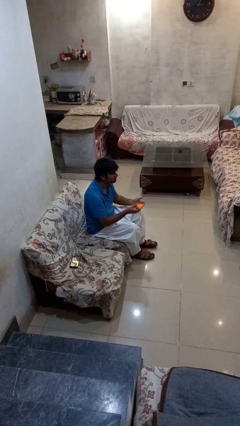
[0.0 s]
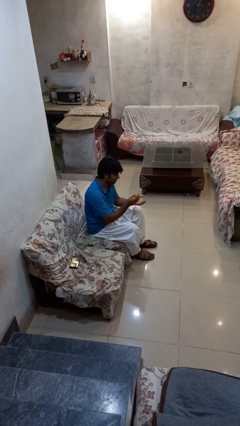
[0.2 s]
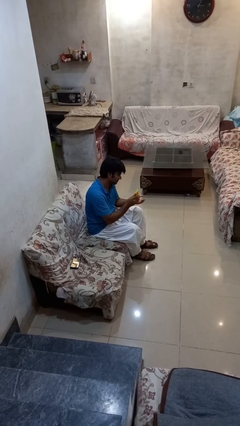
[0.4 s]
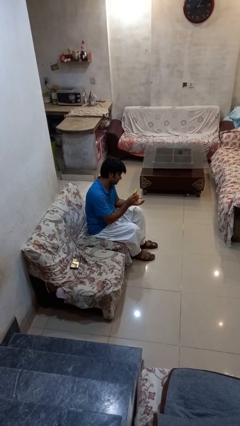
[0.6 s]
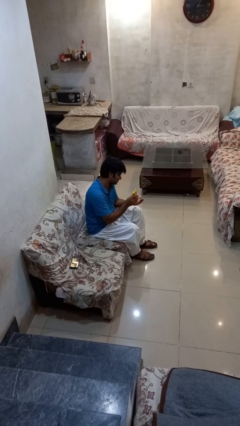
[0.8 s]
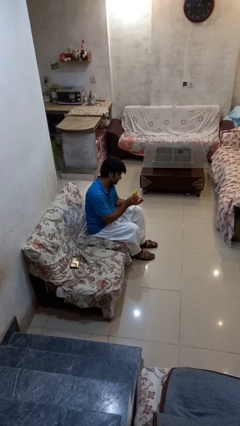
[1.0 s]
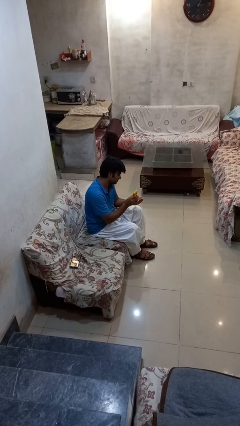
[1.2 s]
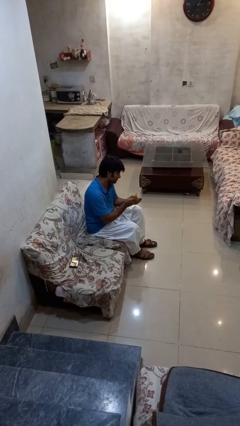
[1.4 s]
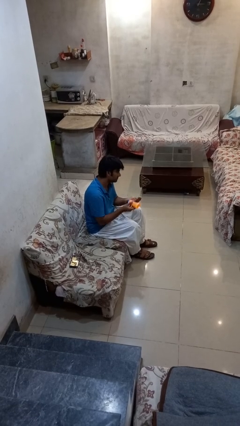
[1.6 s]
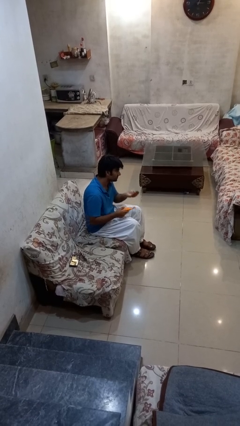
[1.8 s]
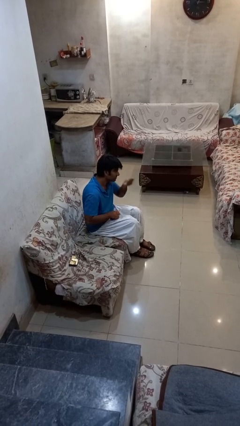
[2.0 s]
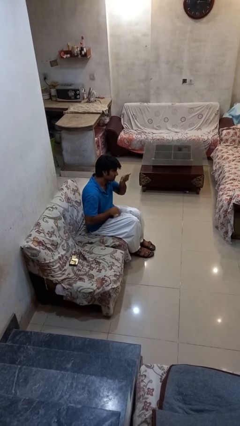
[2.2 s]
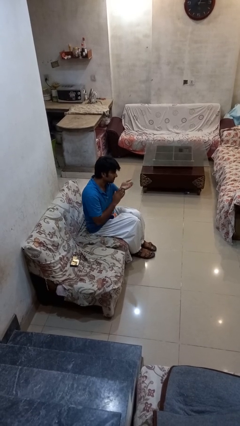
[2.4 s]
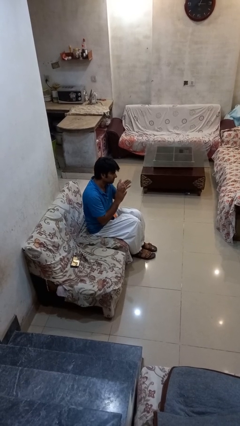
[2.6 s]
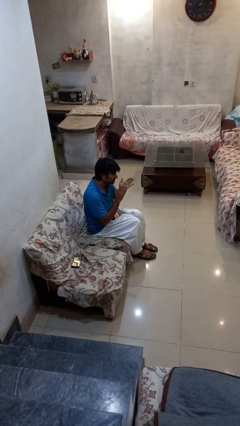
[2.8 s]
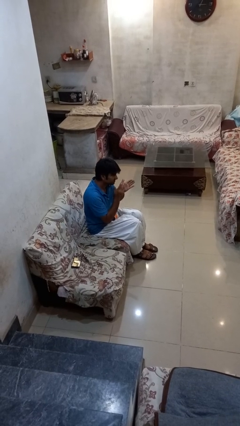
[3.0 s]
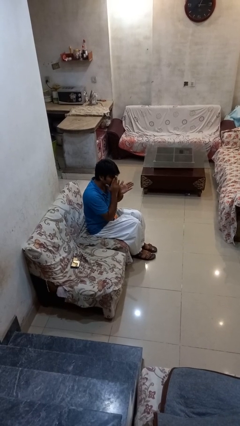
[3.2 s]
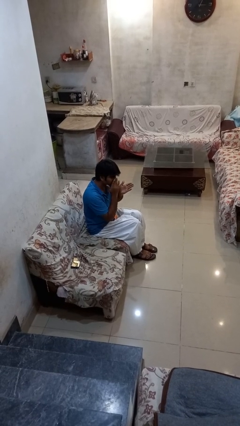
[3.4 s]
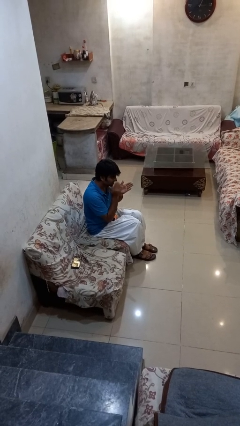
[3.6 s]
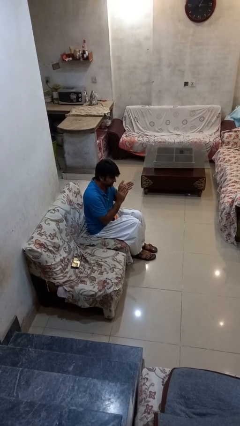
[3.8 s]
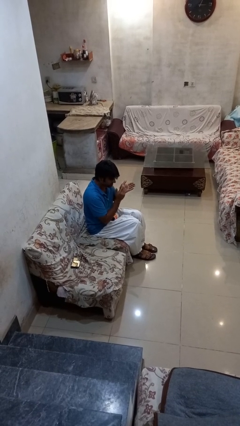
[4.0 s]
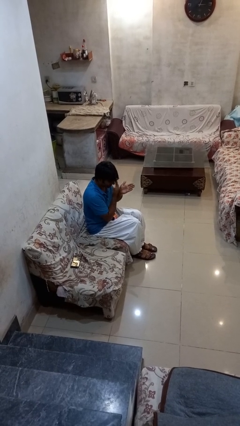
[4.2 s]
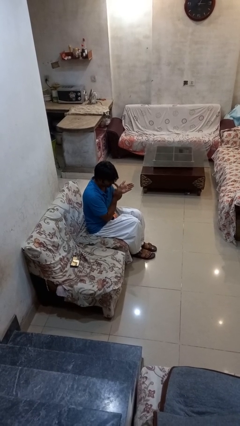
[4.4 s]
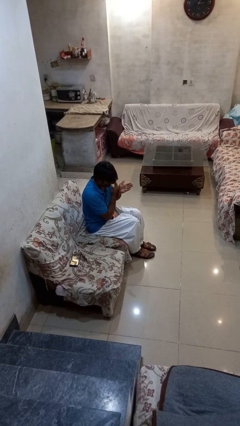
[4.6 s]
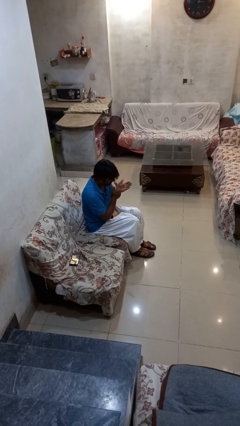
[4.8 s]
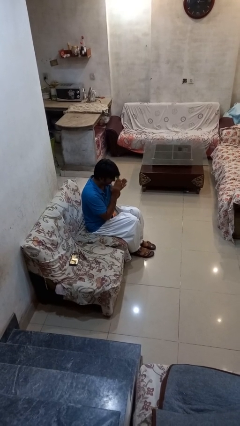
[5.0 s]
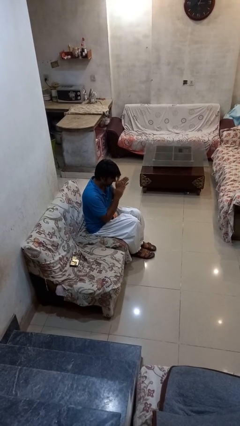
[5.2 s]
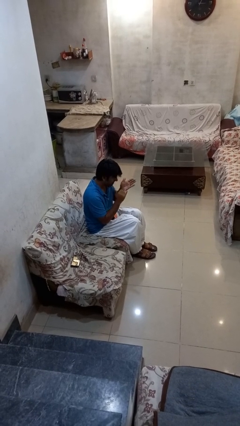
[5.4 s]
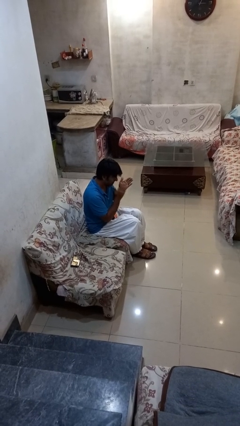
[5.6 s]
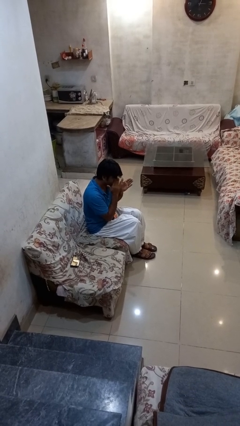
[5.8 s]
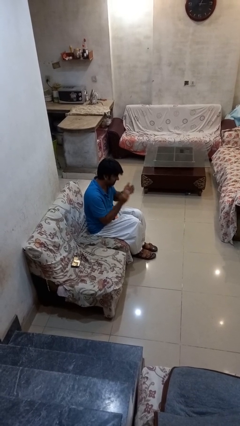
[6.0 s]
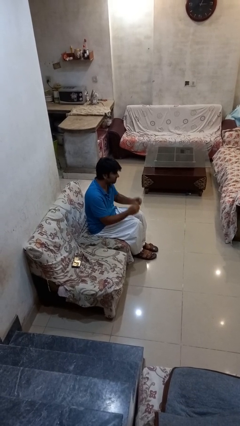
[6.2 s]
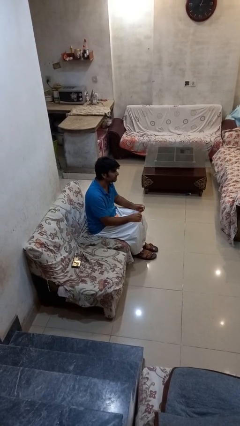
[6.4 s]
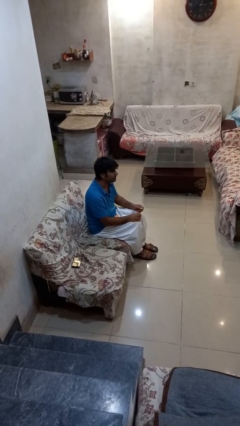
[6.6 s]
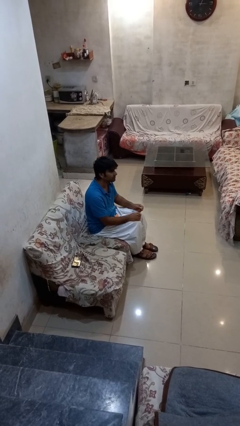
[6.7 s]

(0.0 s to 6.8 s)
person applies facial moisturizer

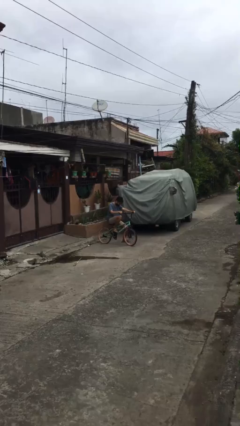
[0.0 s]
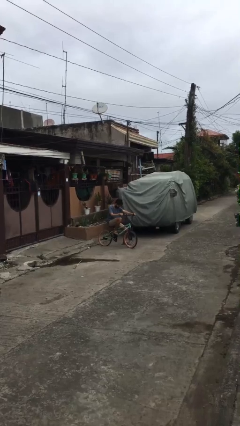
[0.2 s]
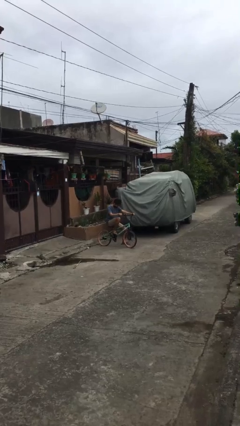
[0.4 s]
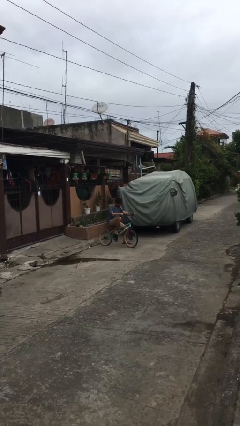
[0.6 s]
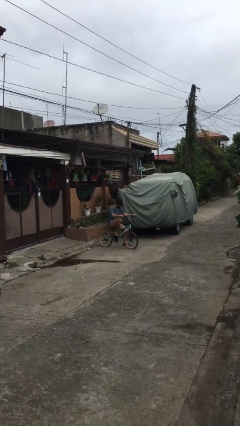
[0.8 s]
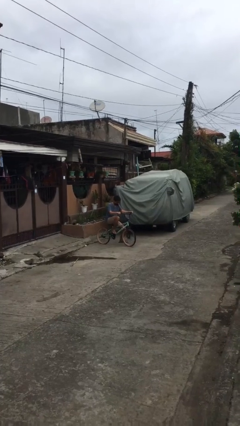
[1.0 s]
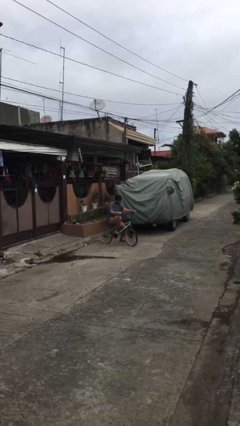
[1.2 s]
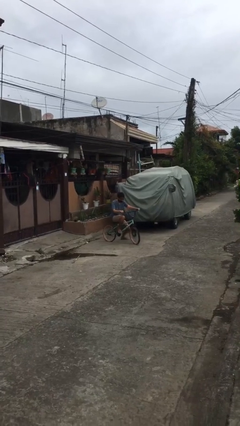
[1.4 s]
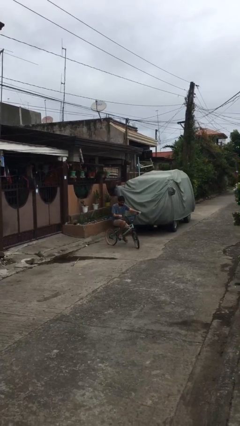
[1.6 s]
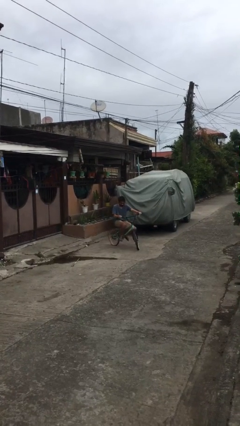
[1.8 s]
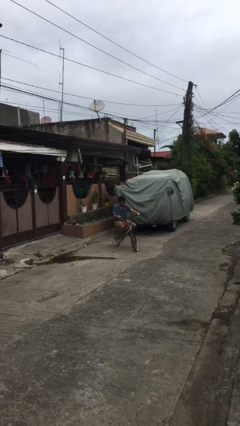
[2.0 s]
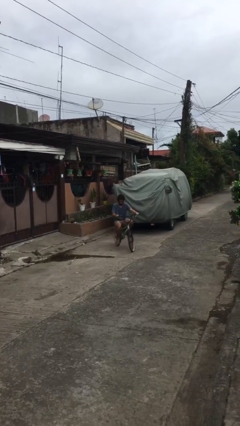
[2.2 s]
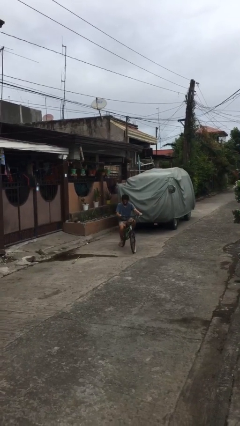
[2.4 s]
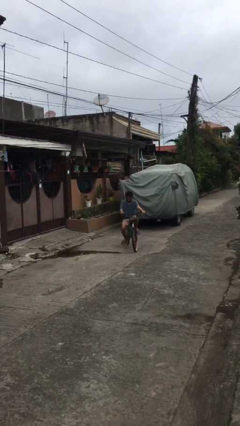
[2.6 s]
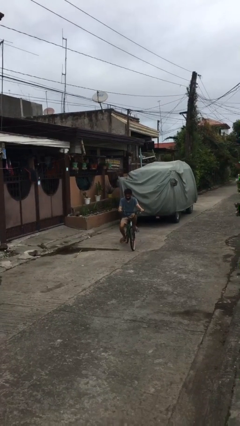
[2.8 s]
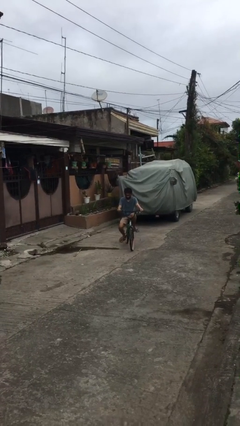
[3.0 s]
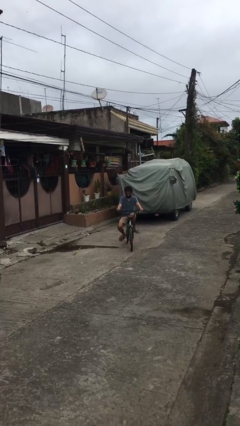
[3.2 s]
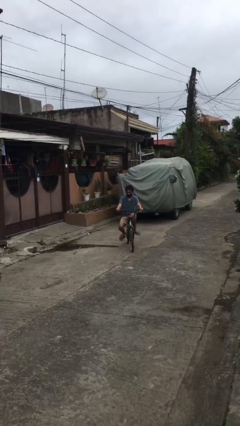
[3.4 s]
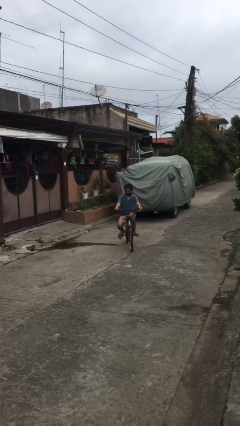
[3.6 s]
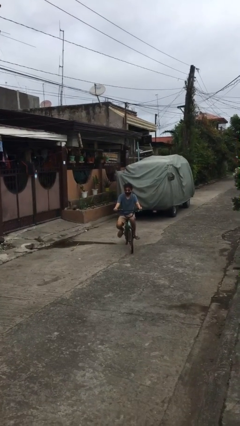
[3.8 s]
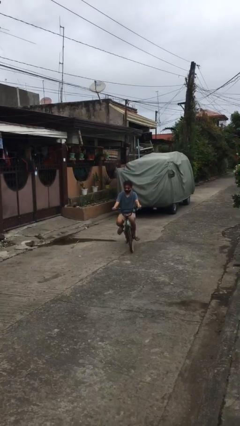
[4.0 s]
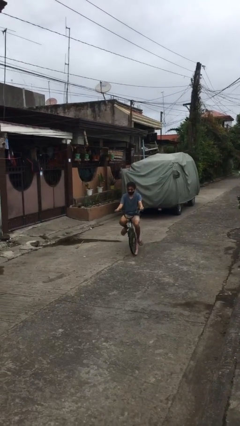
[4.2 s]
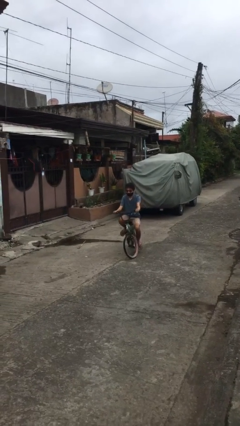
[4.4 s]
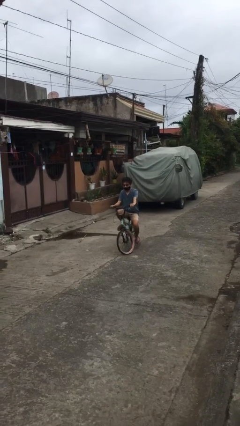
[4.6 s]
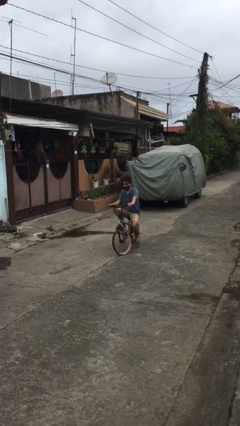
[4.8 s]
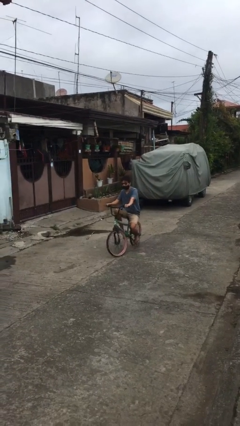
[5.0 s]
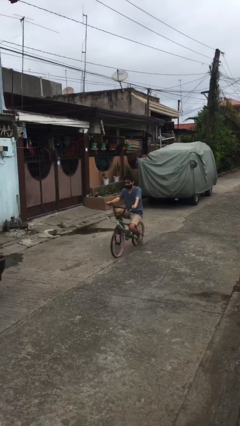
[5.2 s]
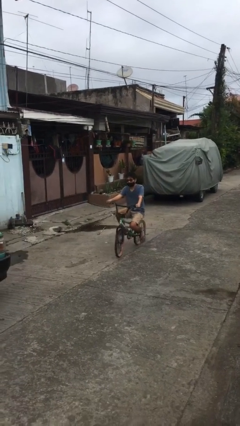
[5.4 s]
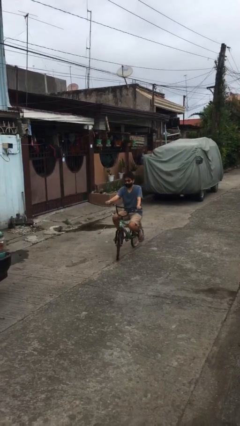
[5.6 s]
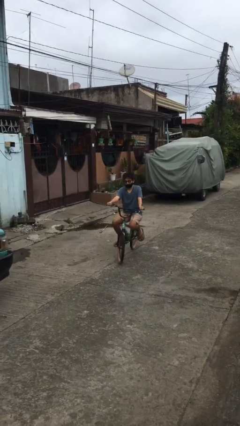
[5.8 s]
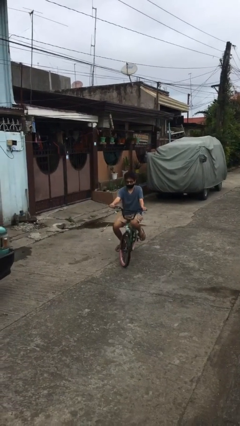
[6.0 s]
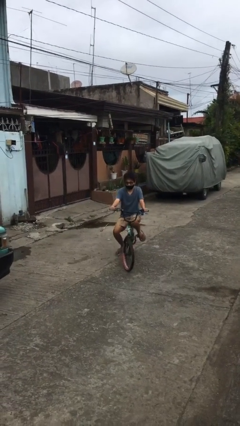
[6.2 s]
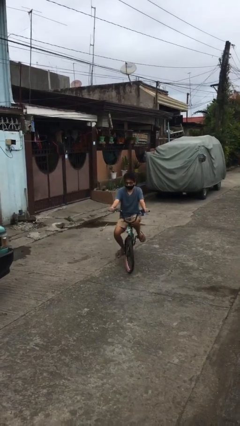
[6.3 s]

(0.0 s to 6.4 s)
person rides bicycle

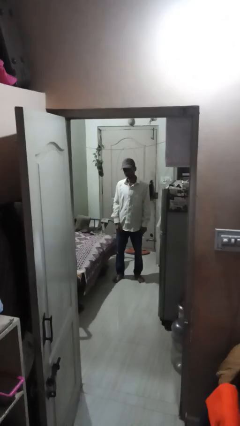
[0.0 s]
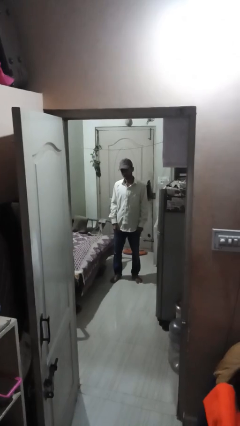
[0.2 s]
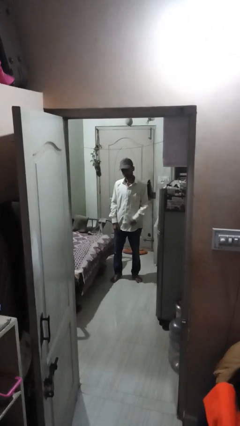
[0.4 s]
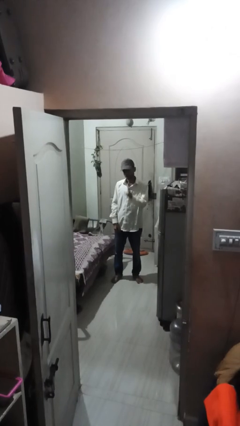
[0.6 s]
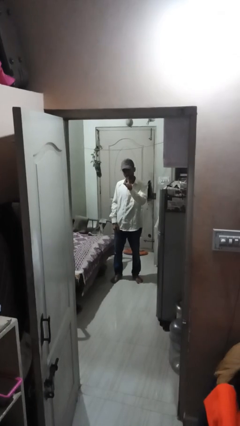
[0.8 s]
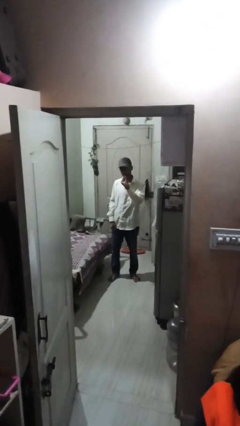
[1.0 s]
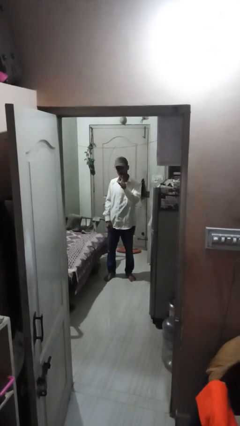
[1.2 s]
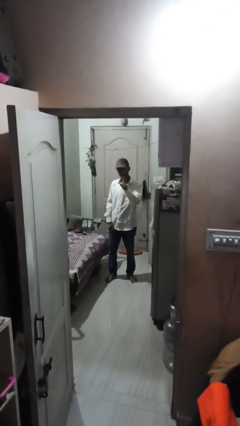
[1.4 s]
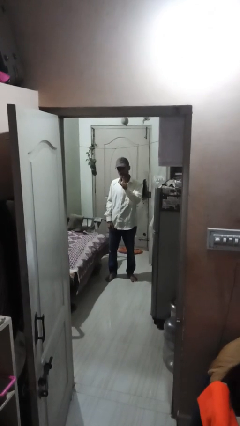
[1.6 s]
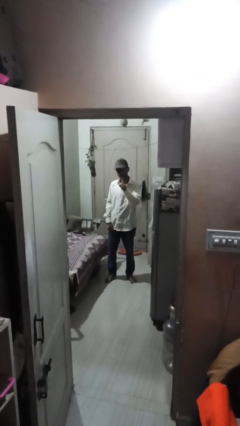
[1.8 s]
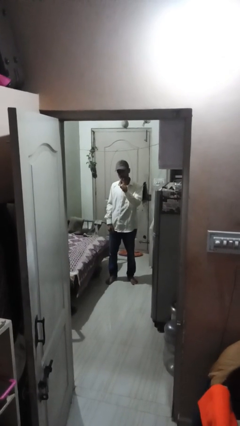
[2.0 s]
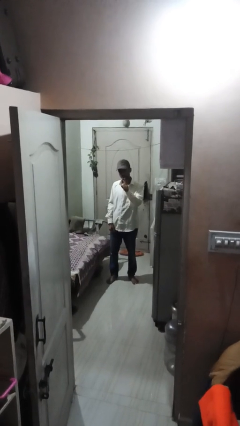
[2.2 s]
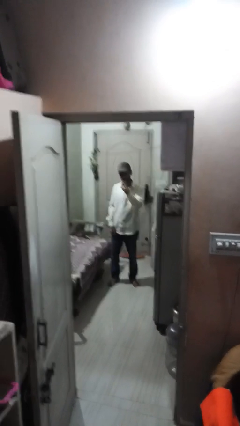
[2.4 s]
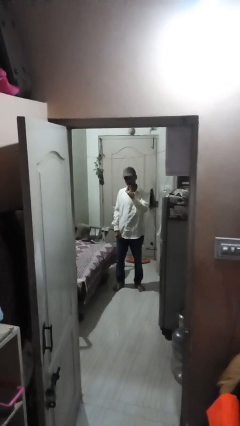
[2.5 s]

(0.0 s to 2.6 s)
person gestures number one

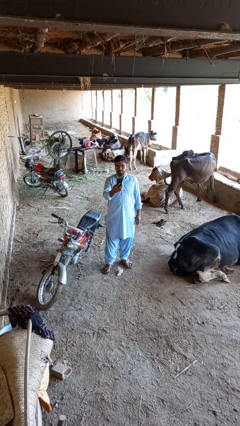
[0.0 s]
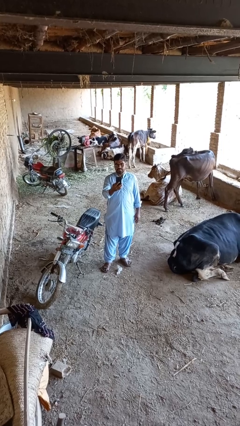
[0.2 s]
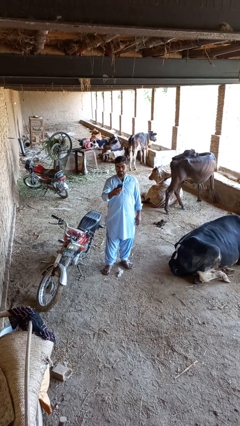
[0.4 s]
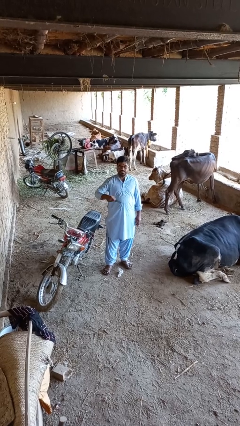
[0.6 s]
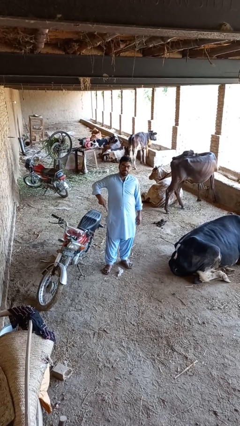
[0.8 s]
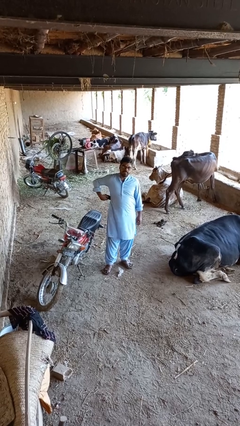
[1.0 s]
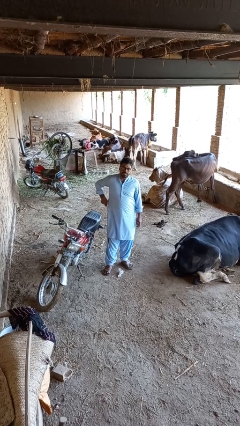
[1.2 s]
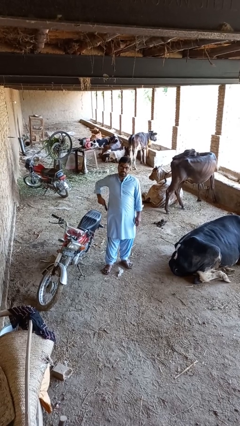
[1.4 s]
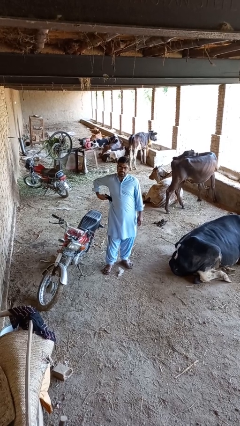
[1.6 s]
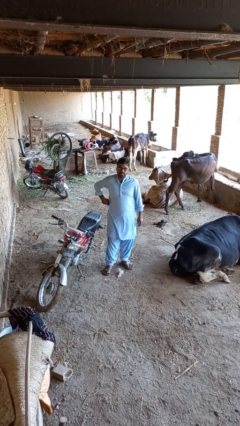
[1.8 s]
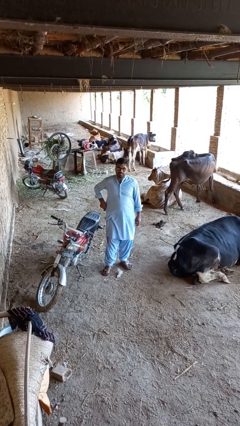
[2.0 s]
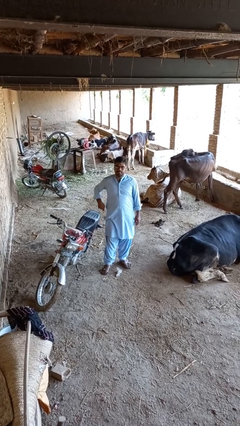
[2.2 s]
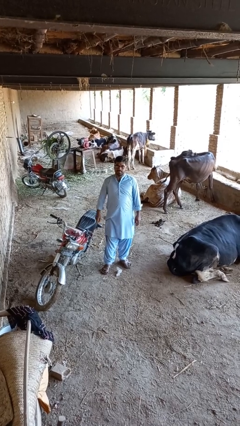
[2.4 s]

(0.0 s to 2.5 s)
person puts phone into pocket
